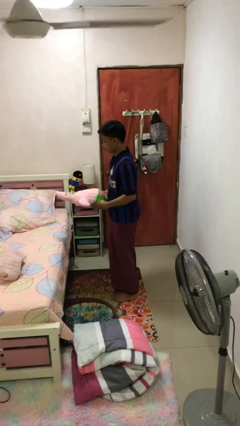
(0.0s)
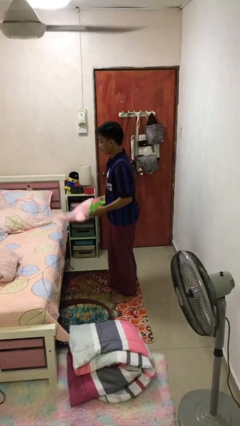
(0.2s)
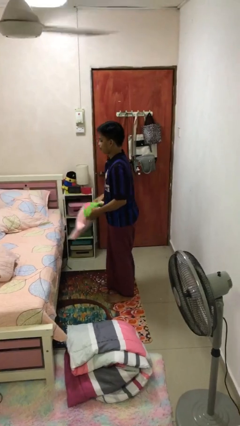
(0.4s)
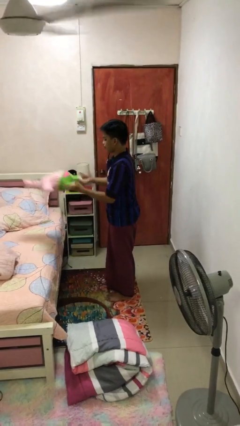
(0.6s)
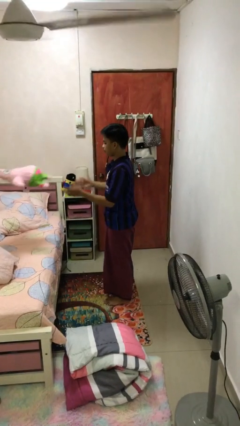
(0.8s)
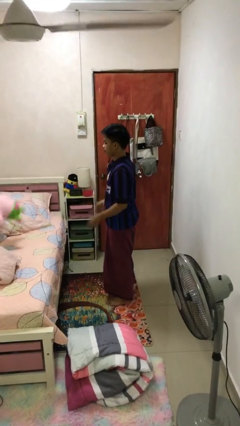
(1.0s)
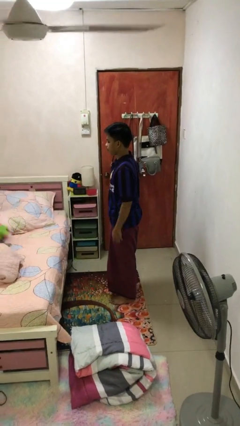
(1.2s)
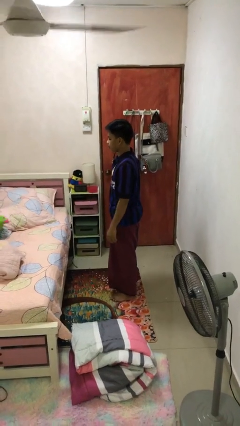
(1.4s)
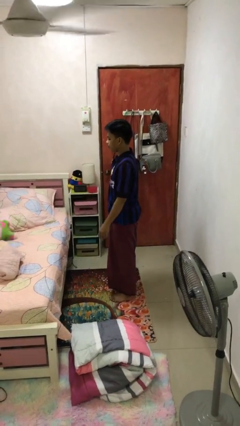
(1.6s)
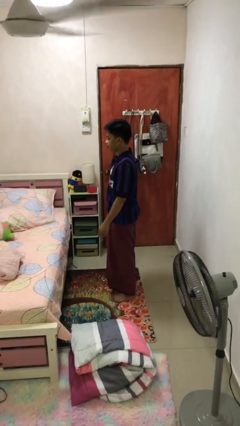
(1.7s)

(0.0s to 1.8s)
person throws object on bed

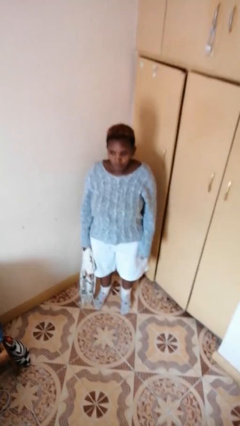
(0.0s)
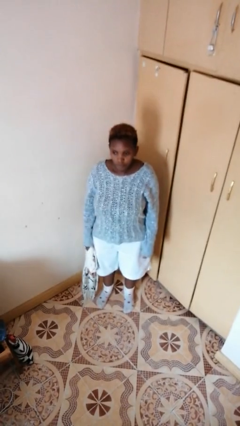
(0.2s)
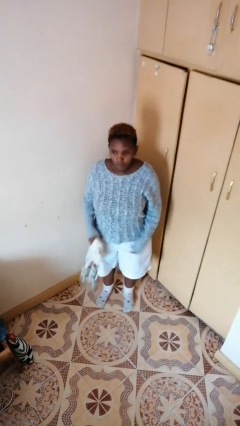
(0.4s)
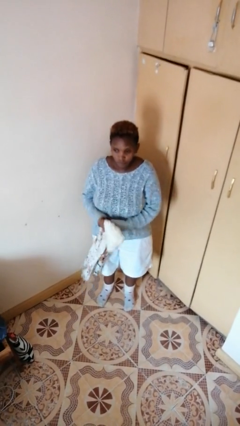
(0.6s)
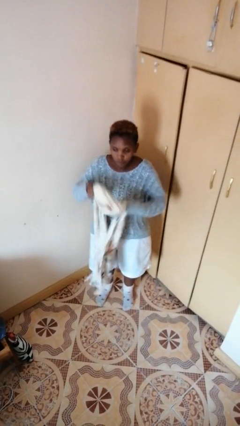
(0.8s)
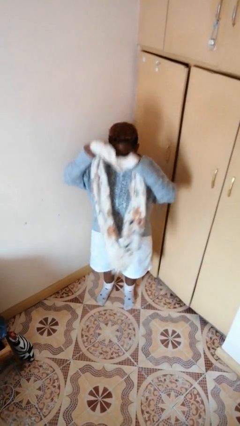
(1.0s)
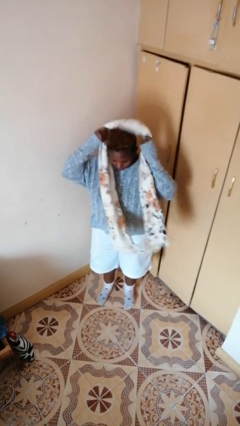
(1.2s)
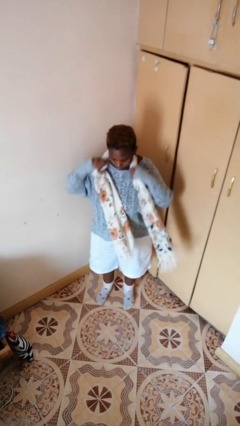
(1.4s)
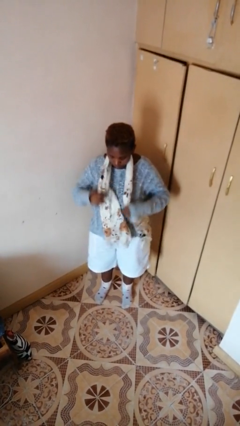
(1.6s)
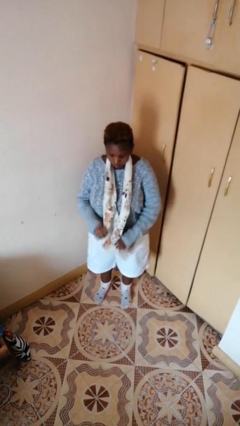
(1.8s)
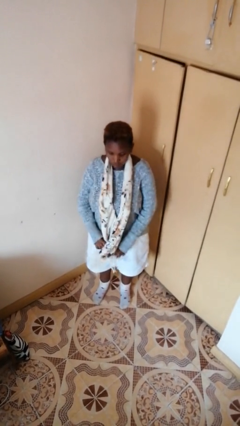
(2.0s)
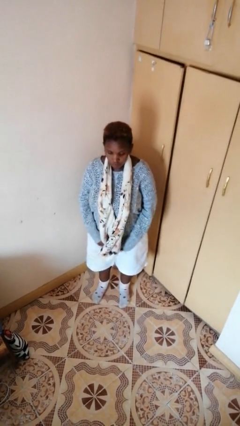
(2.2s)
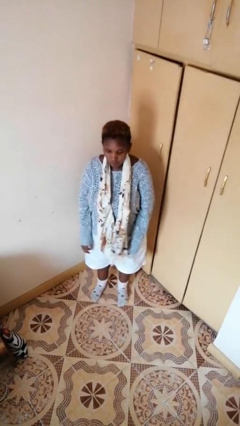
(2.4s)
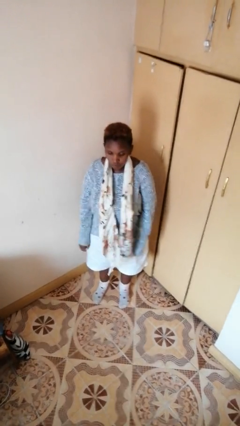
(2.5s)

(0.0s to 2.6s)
person puts on scarf

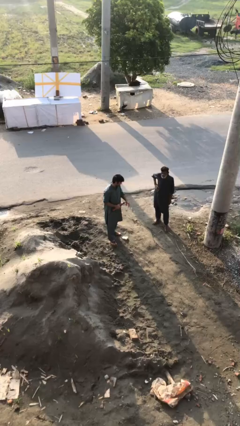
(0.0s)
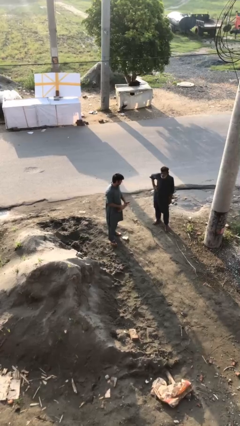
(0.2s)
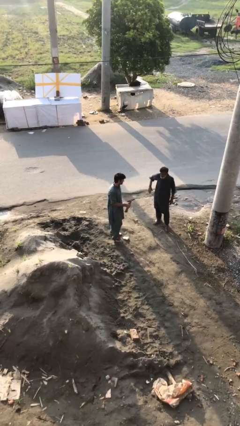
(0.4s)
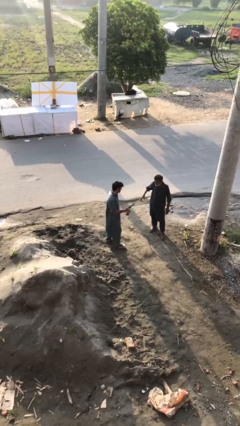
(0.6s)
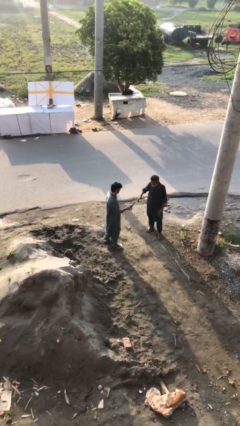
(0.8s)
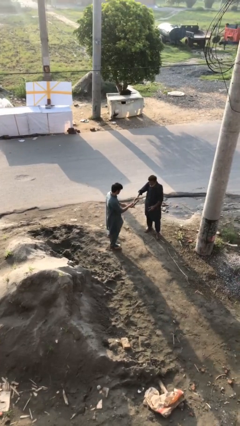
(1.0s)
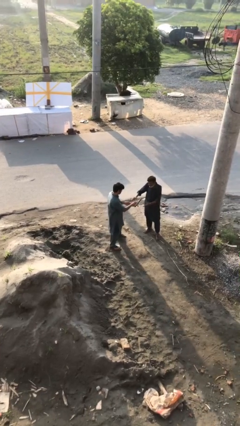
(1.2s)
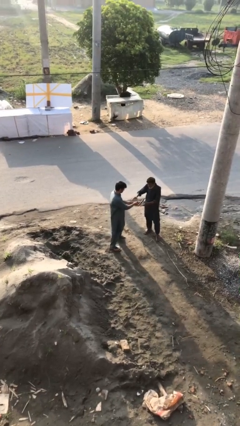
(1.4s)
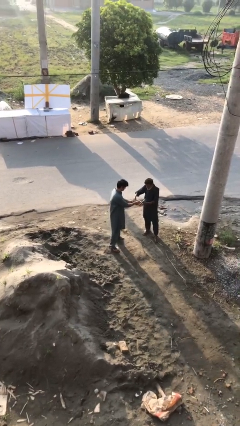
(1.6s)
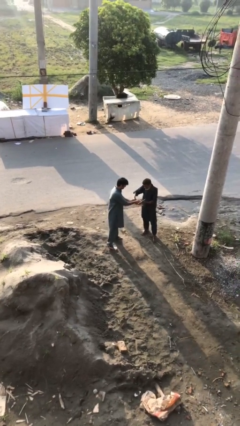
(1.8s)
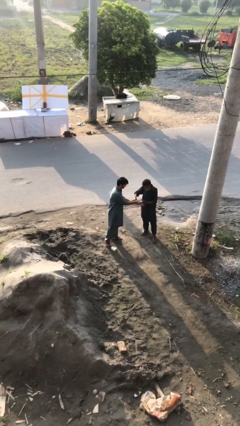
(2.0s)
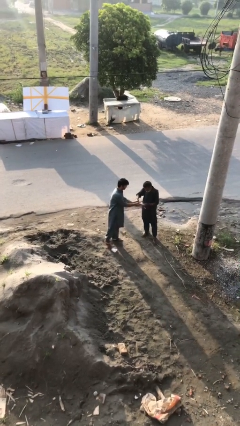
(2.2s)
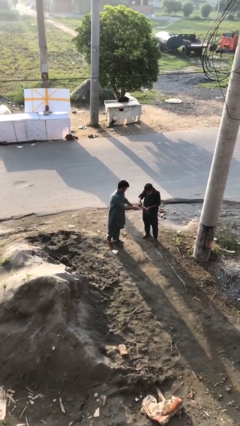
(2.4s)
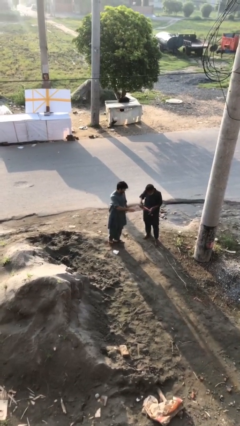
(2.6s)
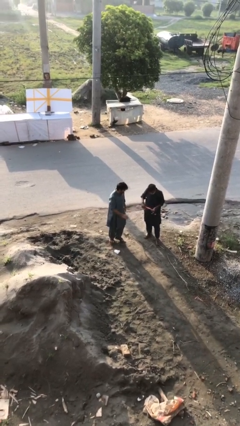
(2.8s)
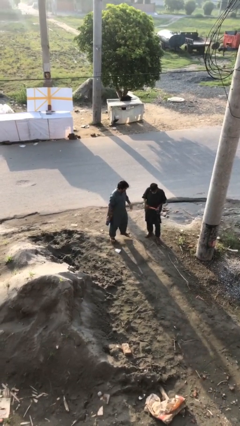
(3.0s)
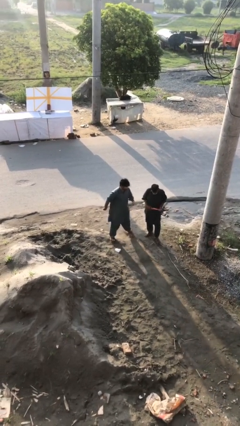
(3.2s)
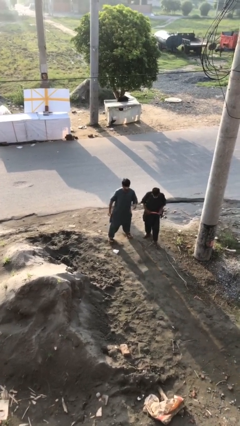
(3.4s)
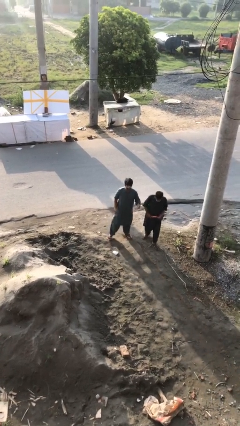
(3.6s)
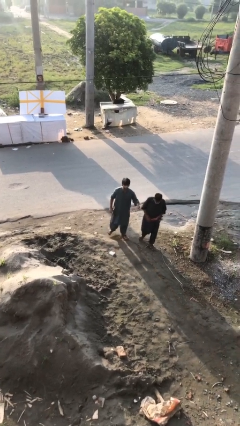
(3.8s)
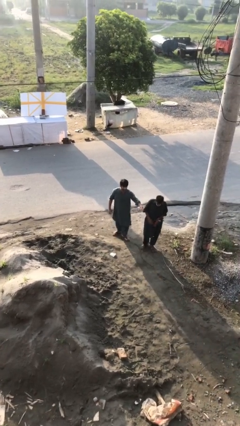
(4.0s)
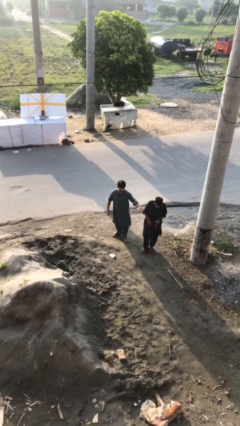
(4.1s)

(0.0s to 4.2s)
person transfers object to person

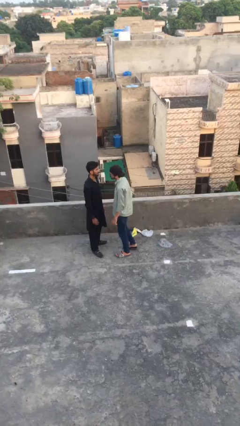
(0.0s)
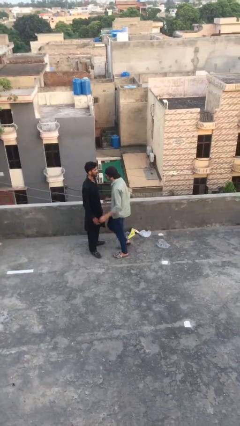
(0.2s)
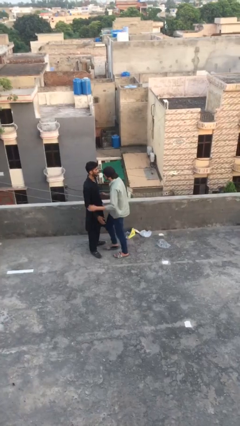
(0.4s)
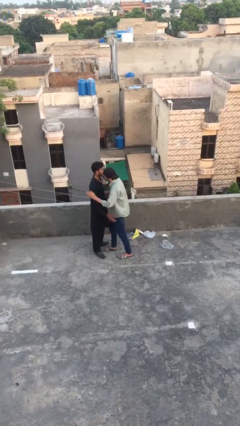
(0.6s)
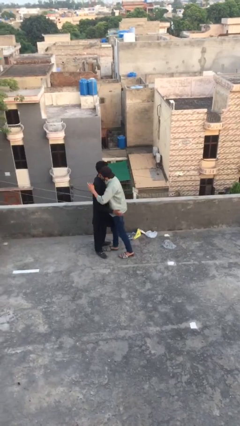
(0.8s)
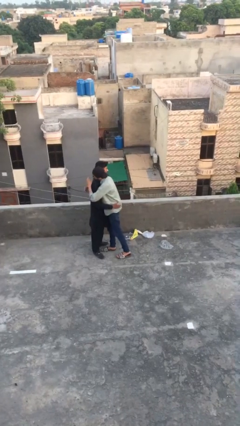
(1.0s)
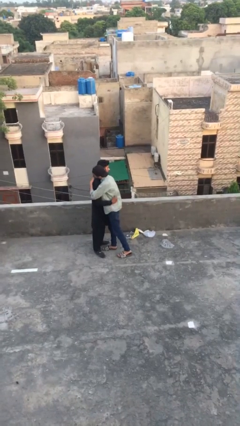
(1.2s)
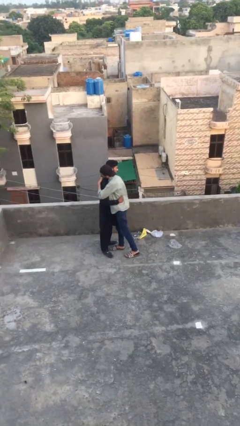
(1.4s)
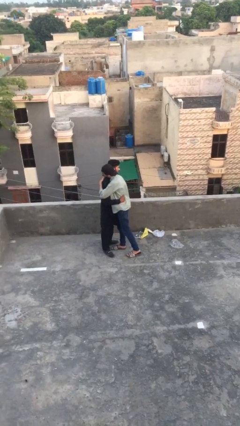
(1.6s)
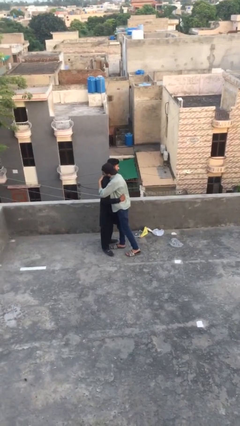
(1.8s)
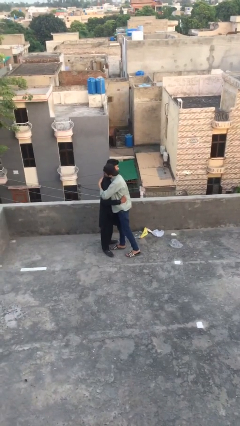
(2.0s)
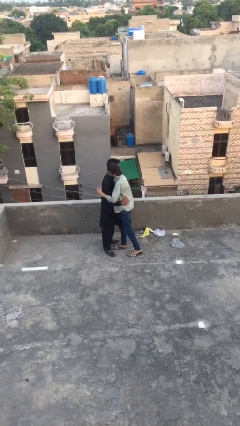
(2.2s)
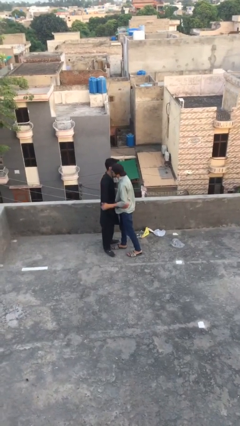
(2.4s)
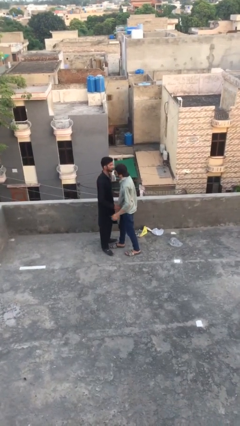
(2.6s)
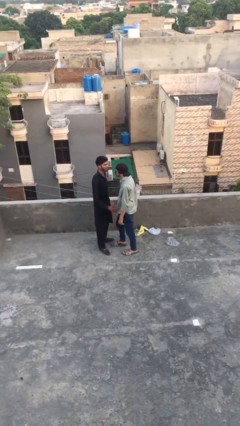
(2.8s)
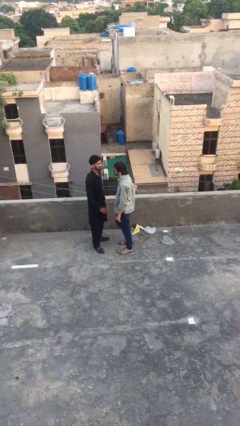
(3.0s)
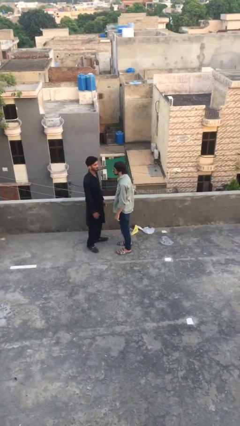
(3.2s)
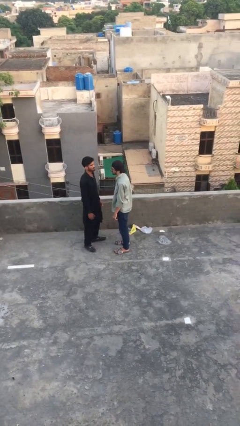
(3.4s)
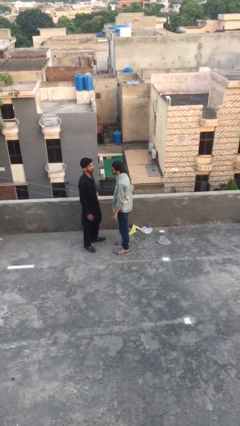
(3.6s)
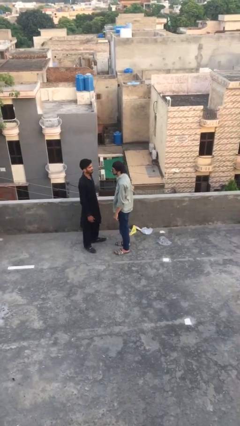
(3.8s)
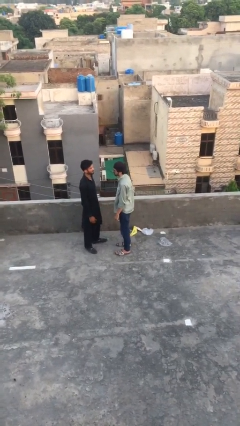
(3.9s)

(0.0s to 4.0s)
person embraces person

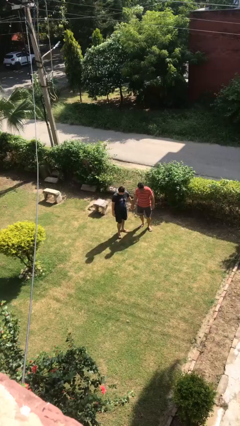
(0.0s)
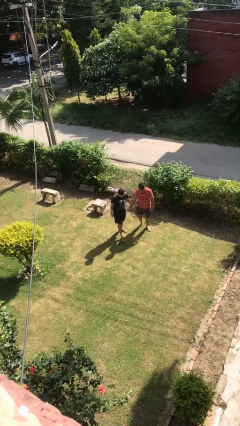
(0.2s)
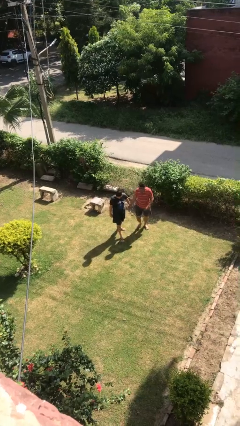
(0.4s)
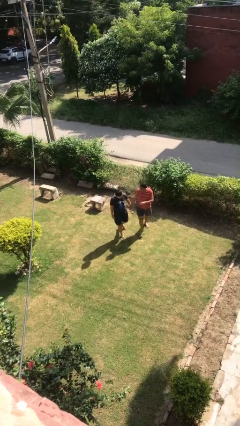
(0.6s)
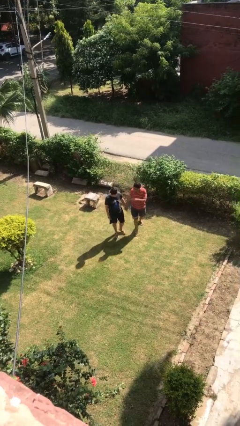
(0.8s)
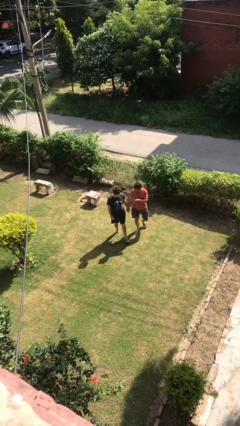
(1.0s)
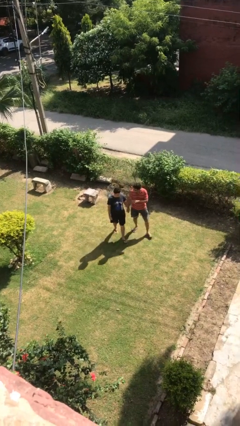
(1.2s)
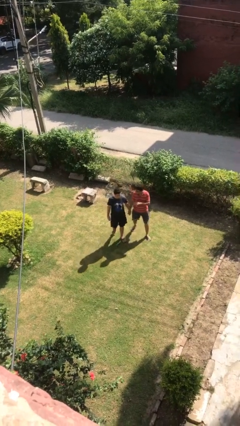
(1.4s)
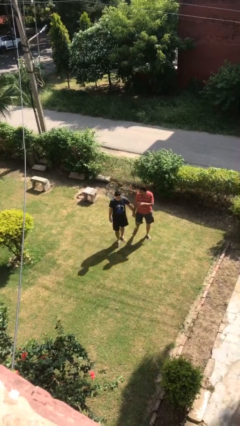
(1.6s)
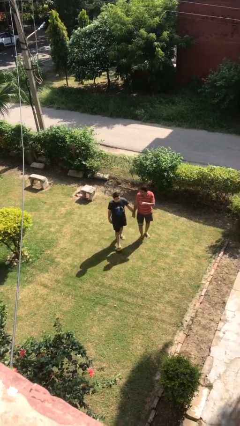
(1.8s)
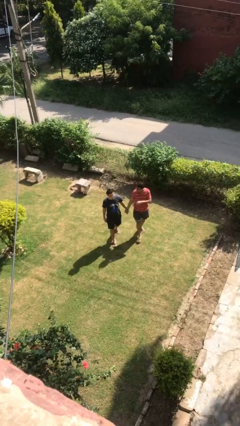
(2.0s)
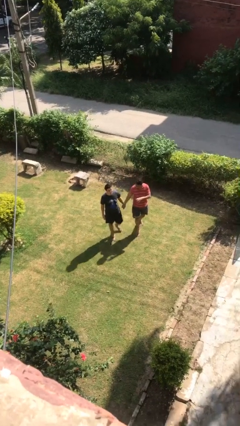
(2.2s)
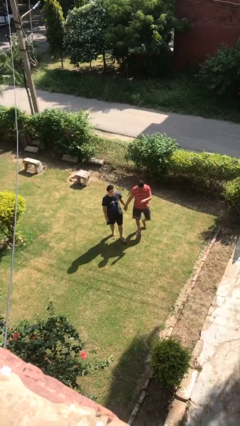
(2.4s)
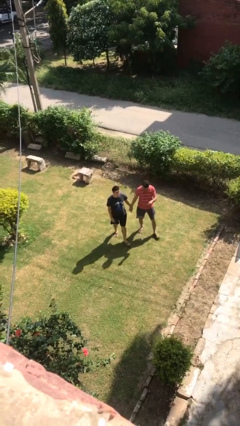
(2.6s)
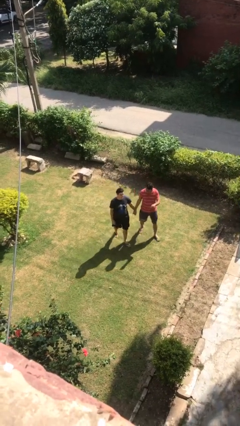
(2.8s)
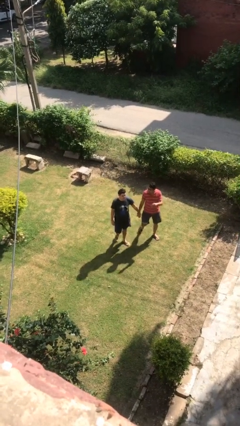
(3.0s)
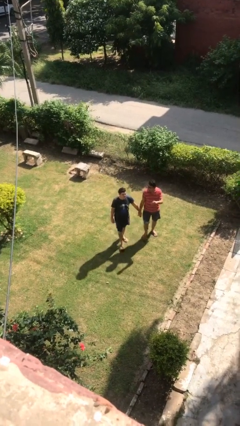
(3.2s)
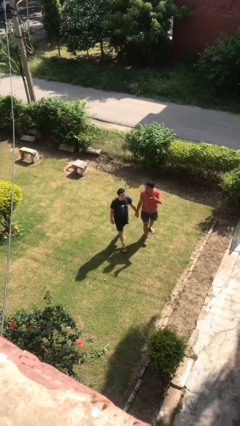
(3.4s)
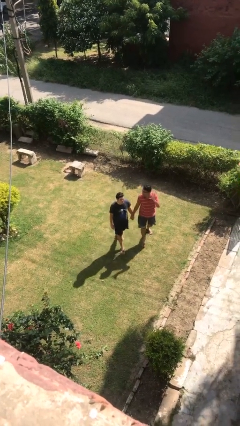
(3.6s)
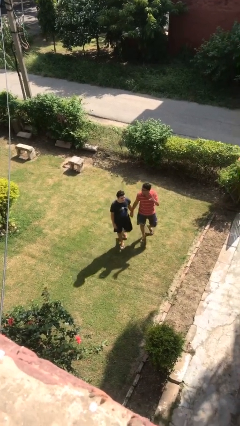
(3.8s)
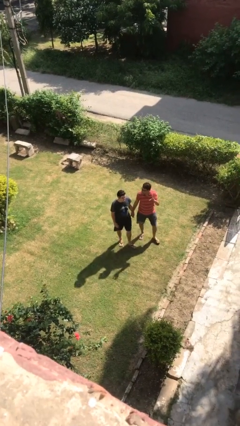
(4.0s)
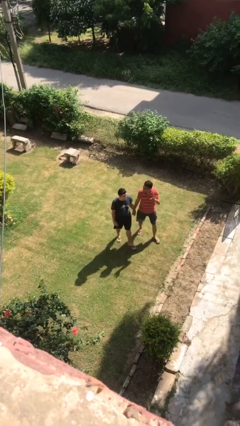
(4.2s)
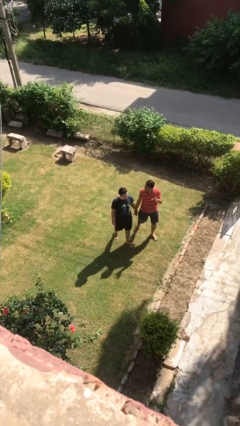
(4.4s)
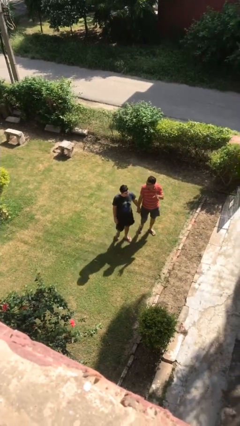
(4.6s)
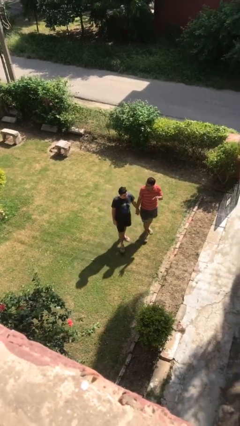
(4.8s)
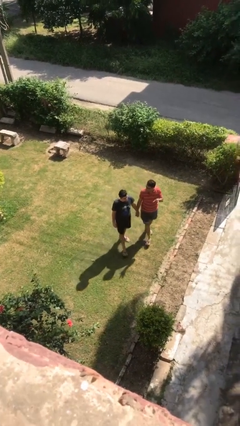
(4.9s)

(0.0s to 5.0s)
person holds hand
